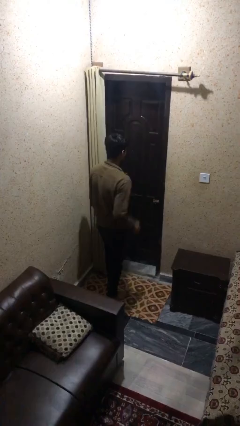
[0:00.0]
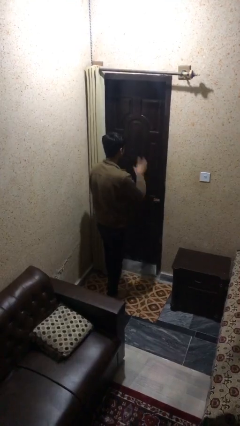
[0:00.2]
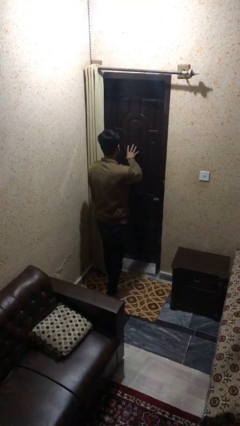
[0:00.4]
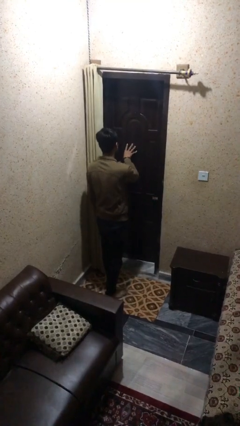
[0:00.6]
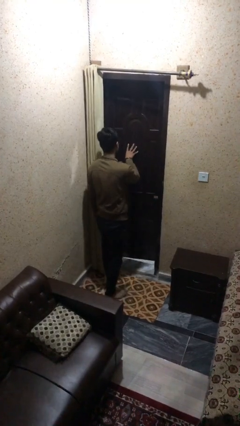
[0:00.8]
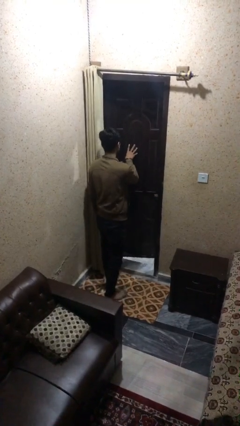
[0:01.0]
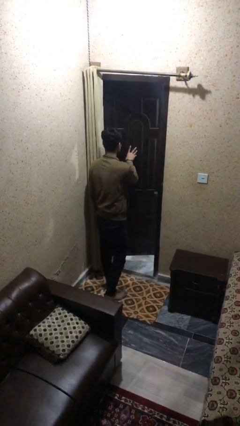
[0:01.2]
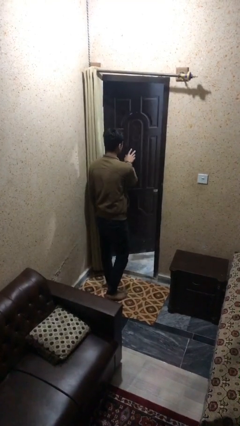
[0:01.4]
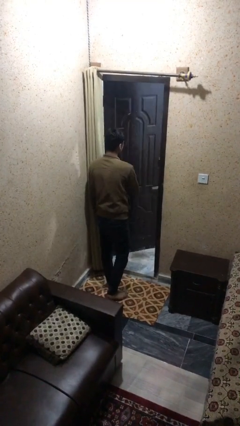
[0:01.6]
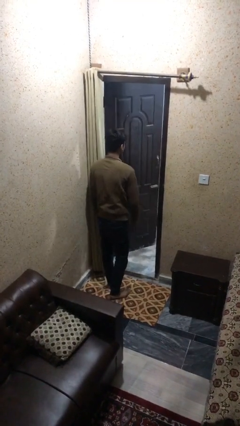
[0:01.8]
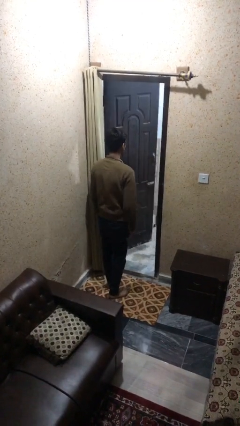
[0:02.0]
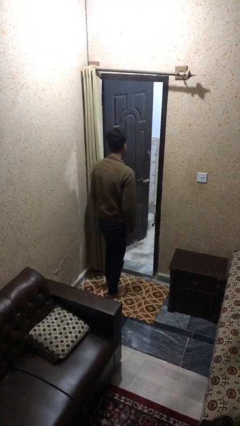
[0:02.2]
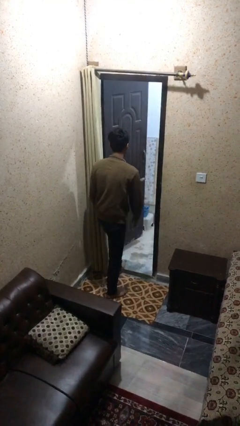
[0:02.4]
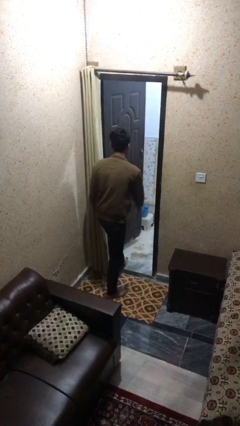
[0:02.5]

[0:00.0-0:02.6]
person opens facility door

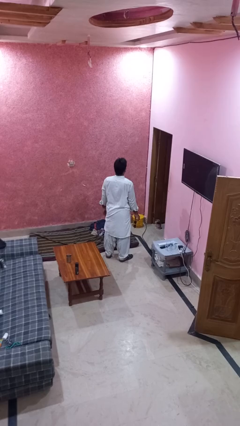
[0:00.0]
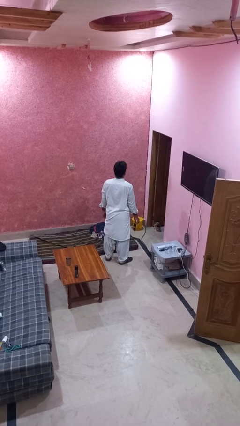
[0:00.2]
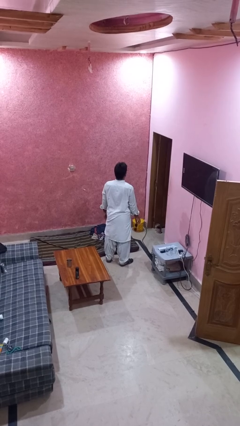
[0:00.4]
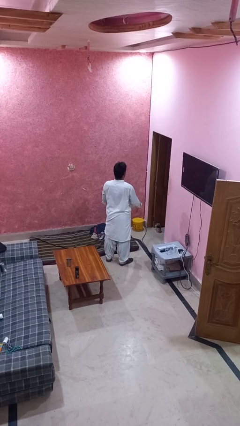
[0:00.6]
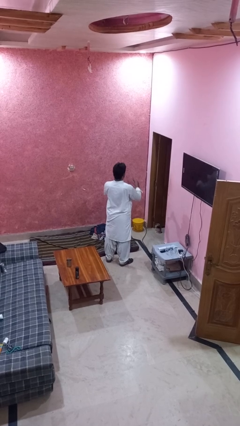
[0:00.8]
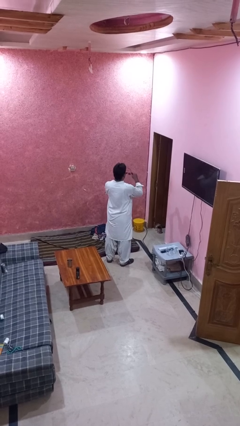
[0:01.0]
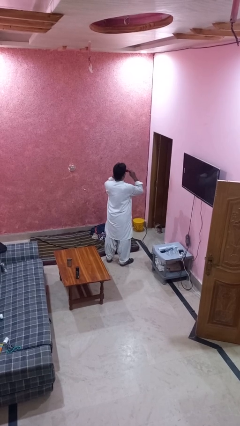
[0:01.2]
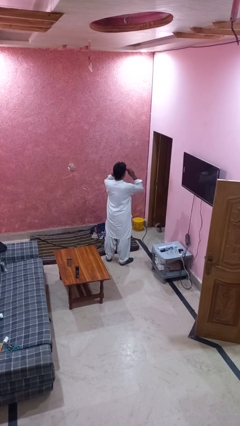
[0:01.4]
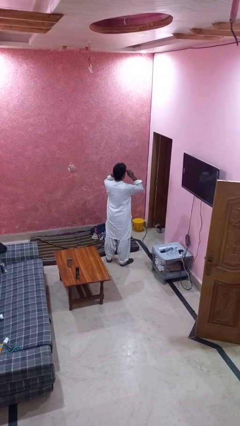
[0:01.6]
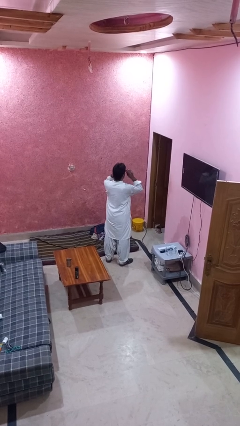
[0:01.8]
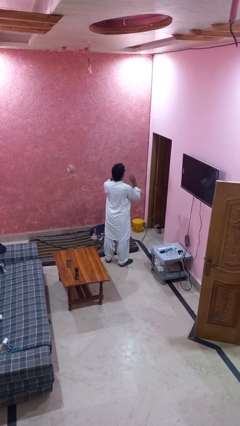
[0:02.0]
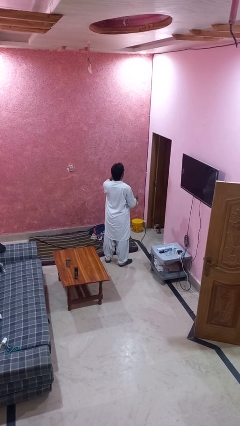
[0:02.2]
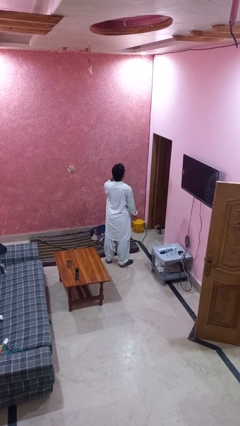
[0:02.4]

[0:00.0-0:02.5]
person puts on sunglasses

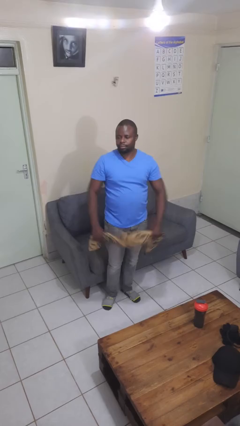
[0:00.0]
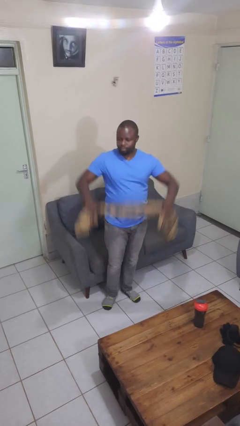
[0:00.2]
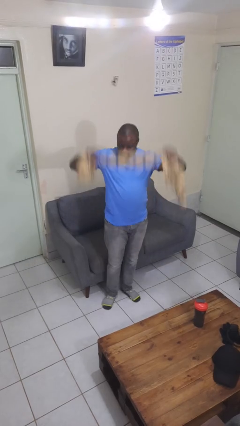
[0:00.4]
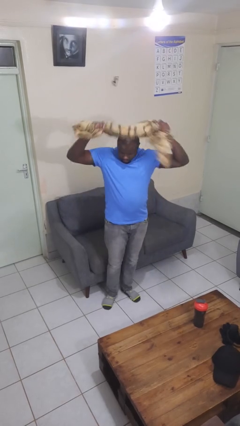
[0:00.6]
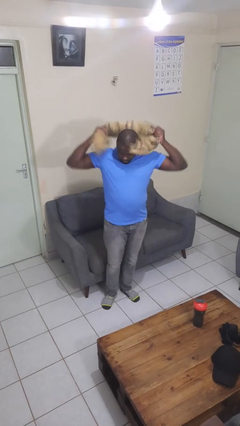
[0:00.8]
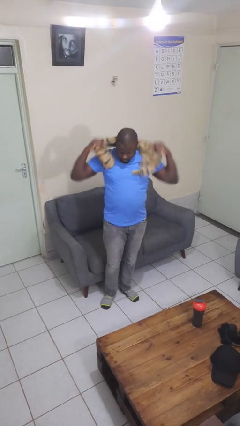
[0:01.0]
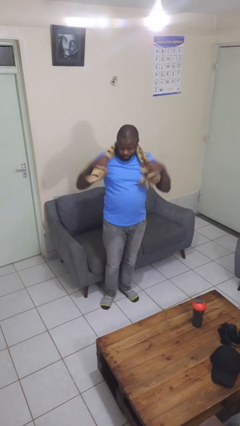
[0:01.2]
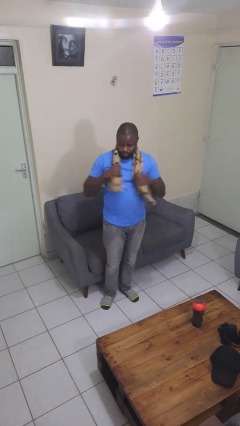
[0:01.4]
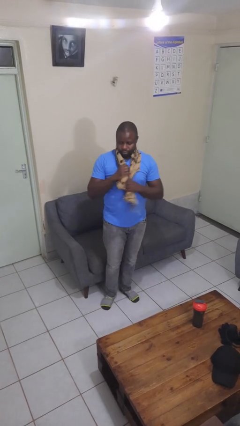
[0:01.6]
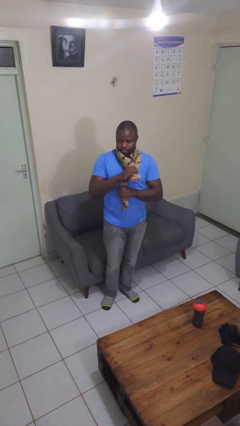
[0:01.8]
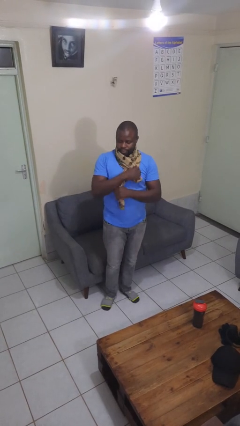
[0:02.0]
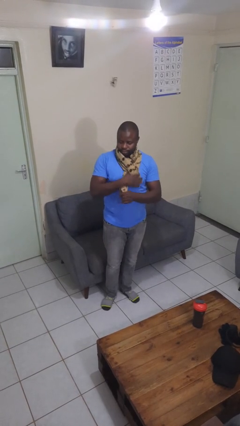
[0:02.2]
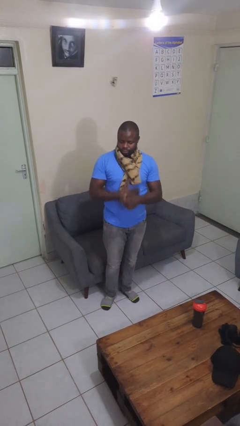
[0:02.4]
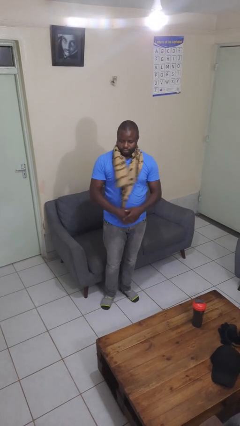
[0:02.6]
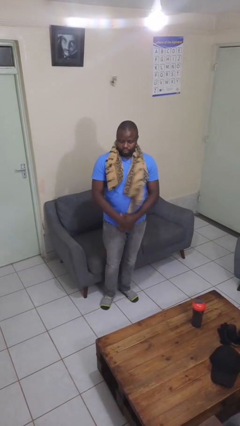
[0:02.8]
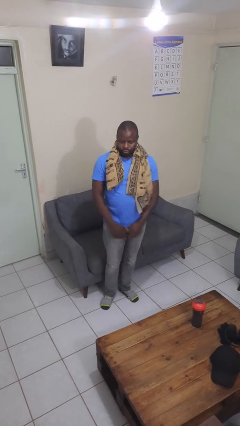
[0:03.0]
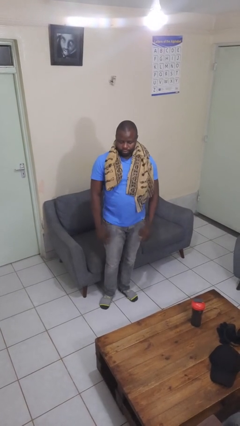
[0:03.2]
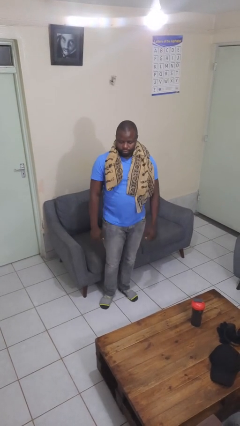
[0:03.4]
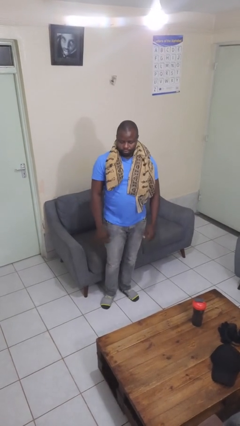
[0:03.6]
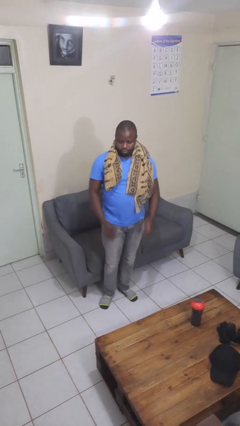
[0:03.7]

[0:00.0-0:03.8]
person puts on scarf

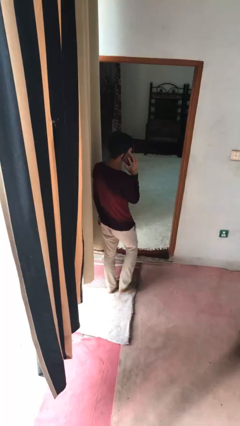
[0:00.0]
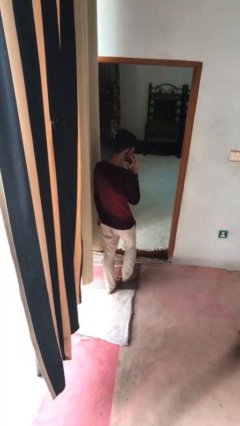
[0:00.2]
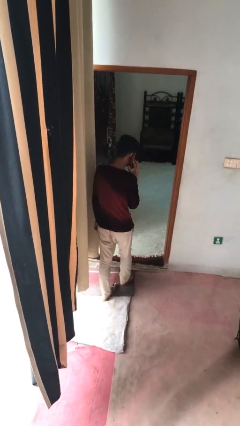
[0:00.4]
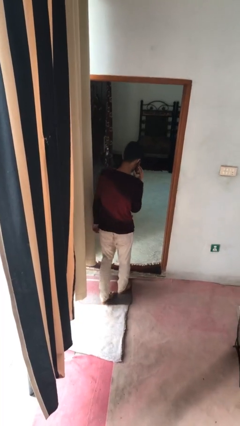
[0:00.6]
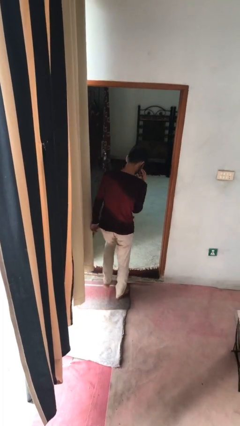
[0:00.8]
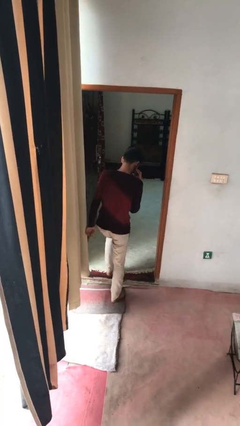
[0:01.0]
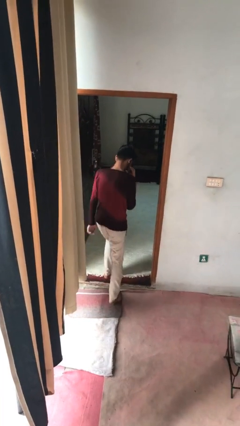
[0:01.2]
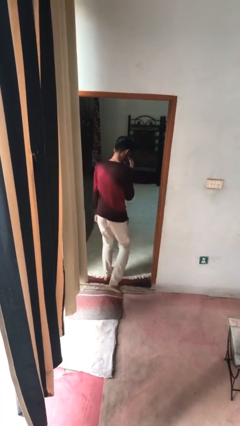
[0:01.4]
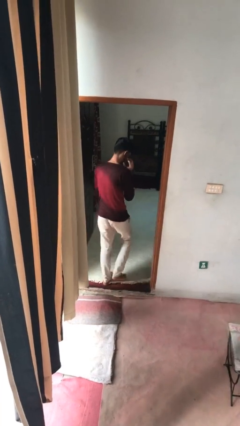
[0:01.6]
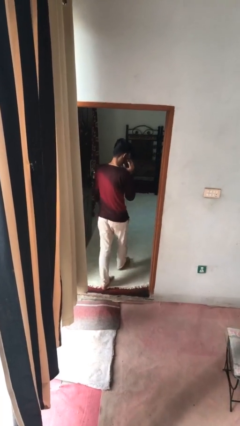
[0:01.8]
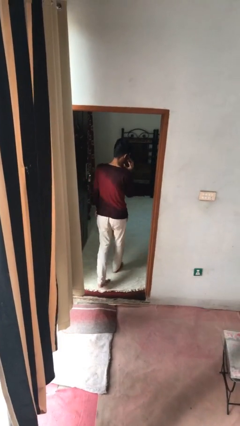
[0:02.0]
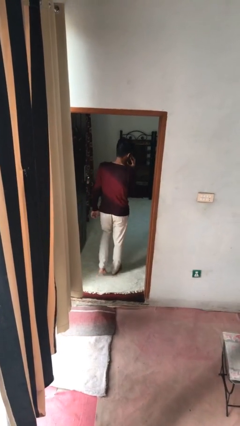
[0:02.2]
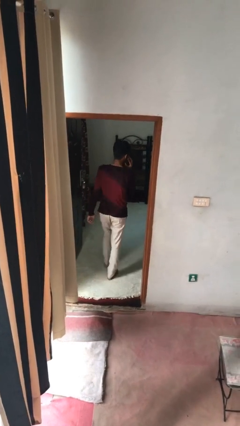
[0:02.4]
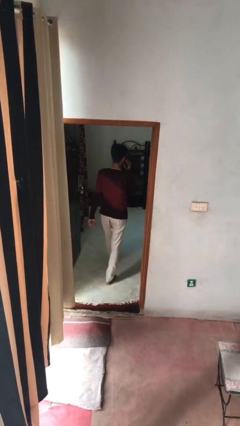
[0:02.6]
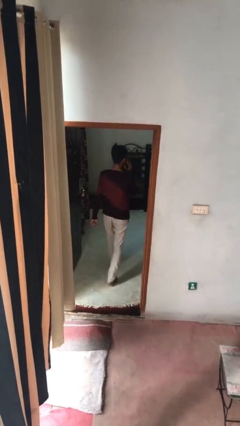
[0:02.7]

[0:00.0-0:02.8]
person exits scene through structure

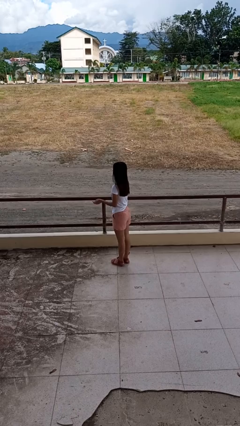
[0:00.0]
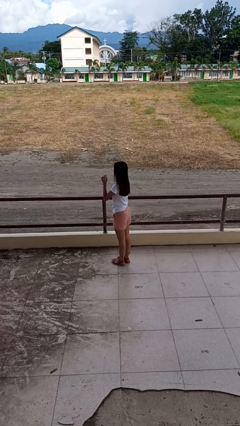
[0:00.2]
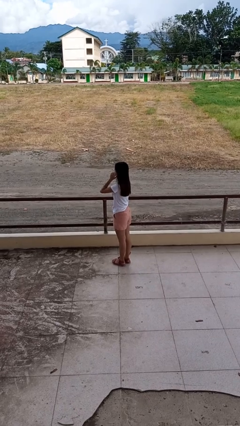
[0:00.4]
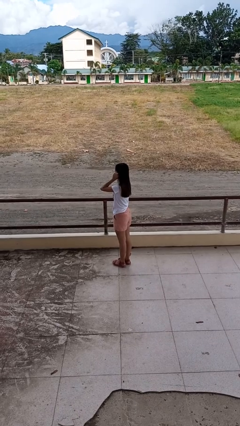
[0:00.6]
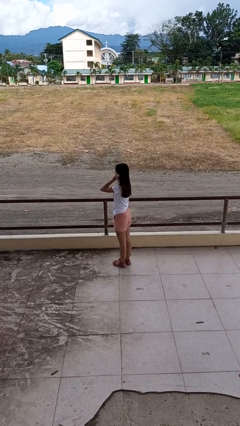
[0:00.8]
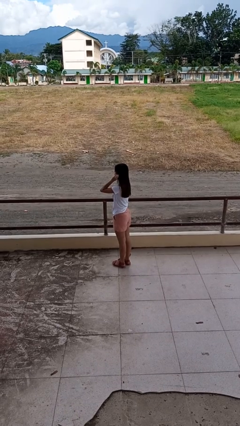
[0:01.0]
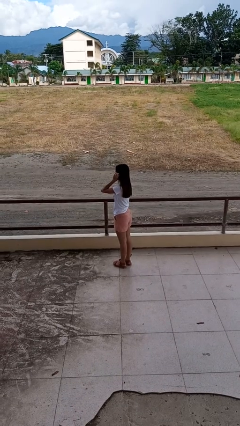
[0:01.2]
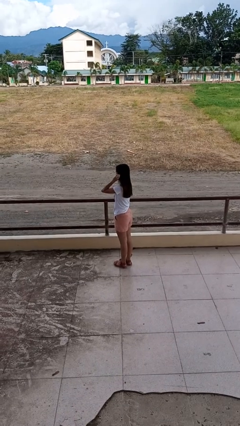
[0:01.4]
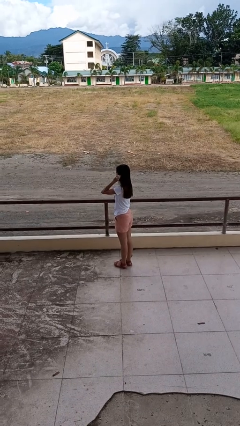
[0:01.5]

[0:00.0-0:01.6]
person touches earlobe

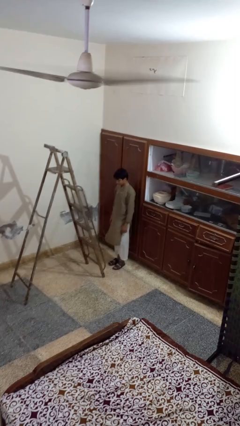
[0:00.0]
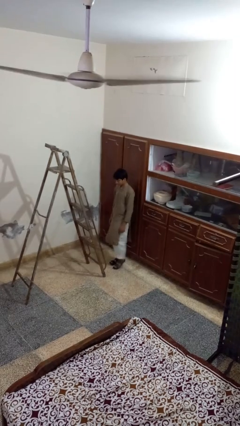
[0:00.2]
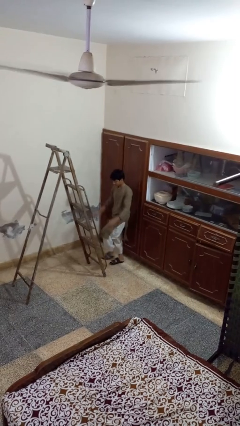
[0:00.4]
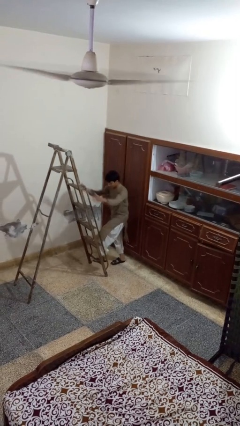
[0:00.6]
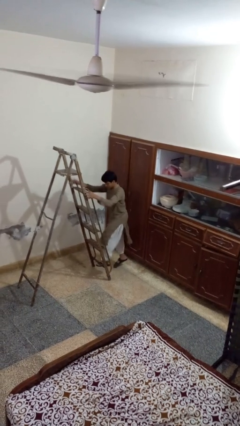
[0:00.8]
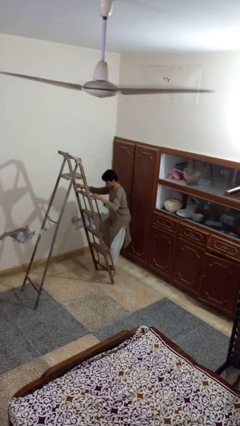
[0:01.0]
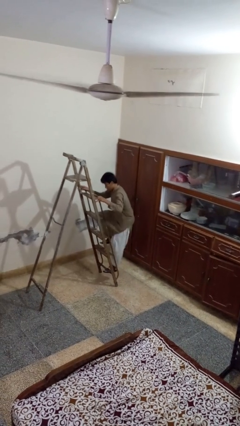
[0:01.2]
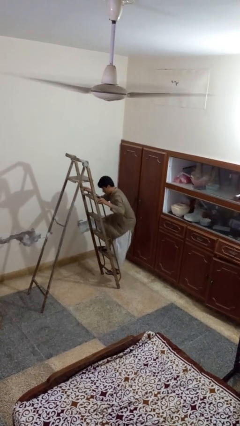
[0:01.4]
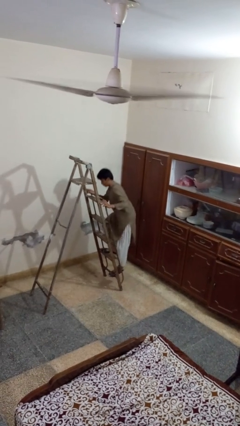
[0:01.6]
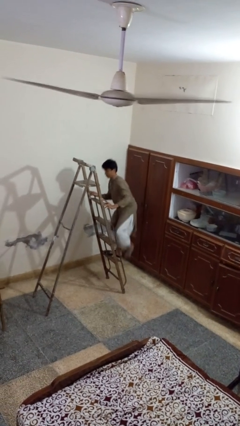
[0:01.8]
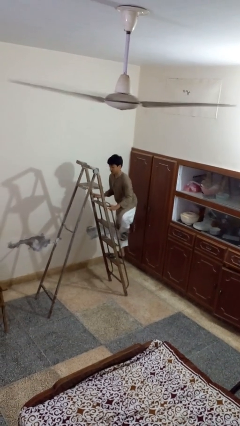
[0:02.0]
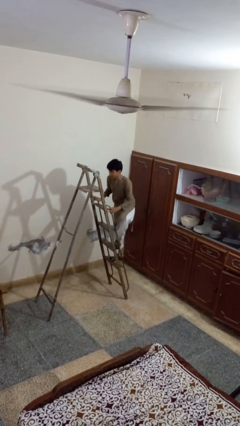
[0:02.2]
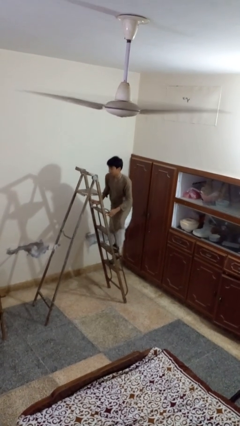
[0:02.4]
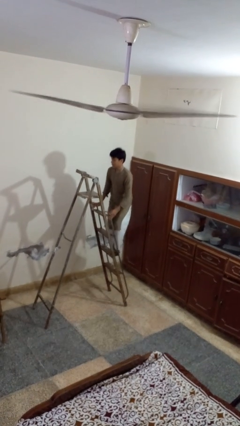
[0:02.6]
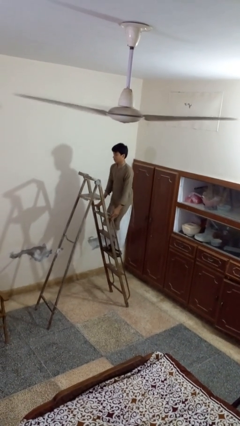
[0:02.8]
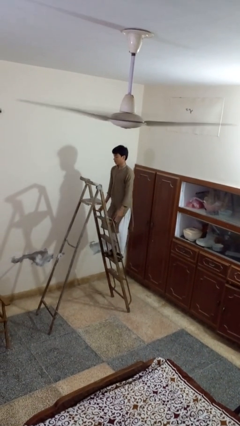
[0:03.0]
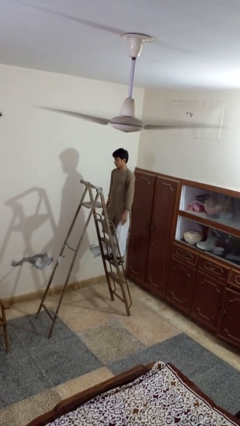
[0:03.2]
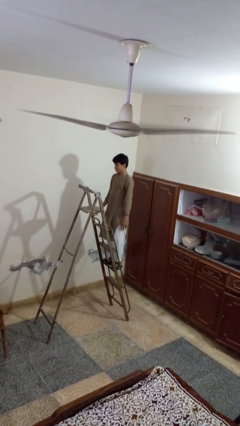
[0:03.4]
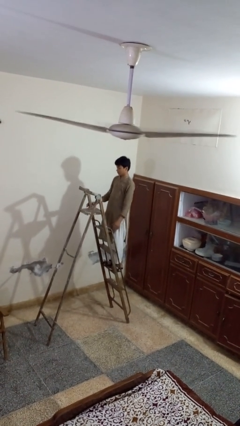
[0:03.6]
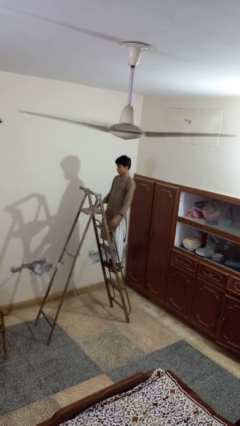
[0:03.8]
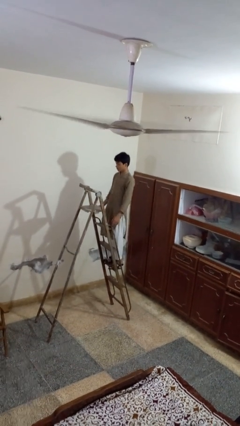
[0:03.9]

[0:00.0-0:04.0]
person climbs up ladder

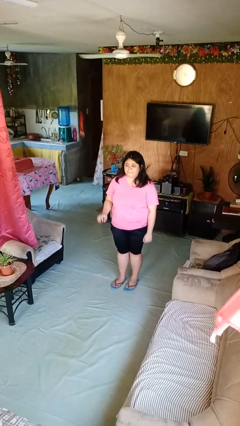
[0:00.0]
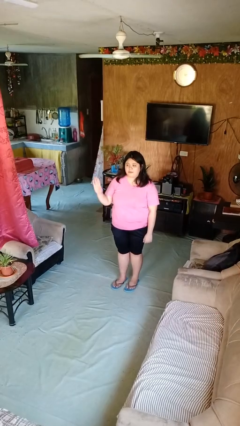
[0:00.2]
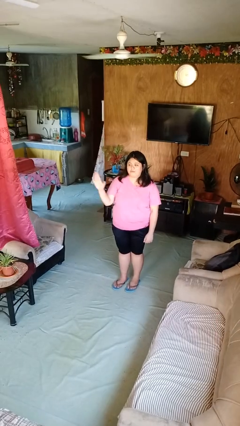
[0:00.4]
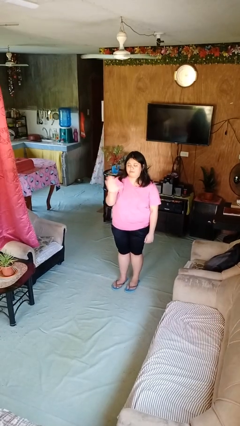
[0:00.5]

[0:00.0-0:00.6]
person gestures swipe left
